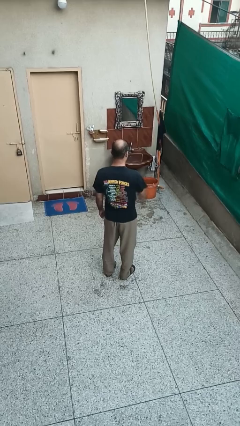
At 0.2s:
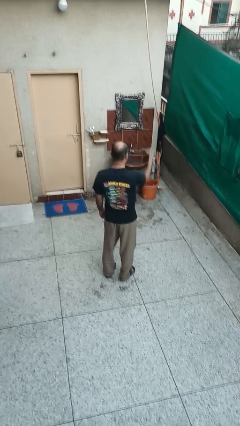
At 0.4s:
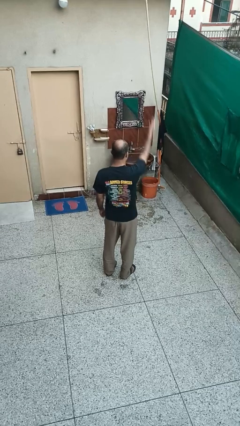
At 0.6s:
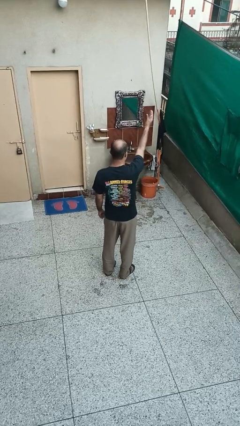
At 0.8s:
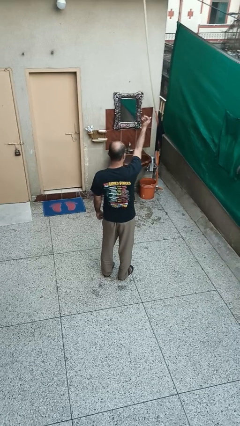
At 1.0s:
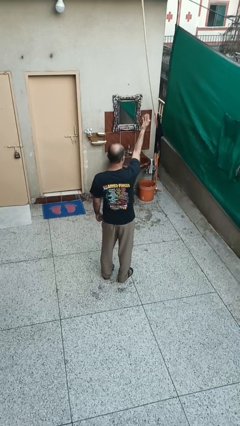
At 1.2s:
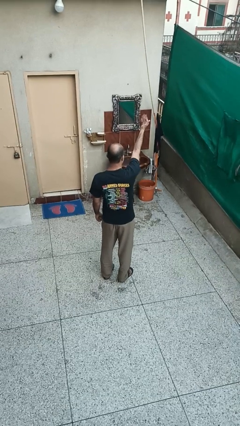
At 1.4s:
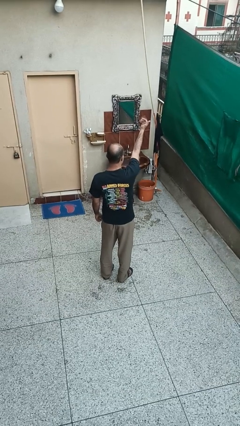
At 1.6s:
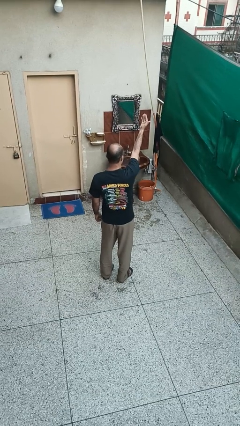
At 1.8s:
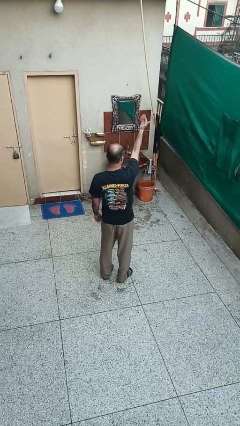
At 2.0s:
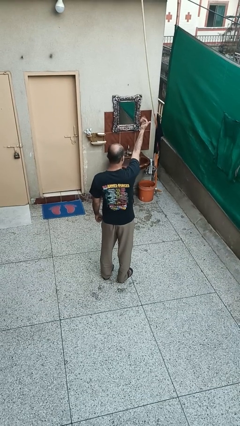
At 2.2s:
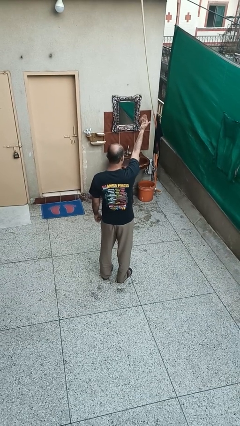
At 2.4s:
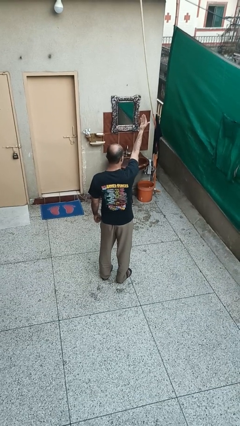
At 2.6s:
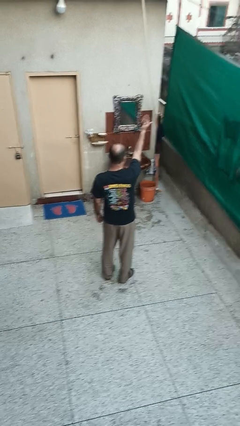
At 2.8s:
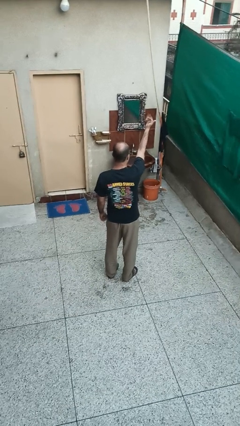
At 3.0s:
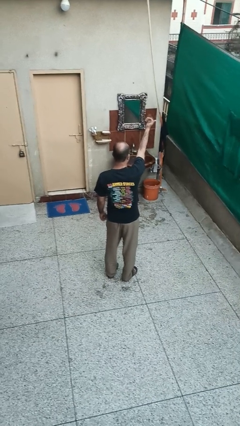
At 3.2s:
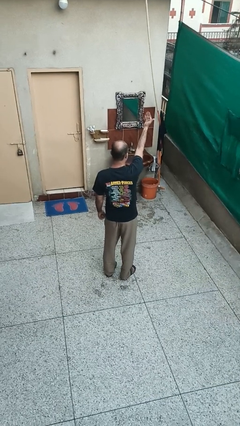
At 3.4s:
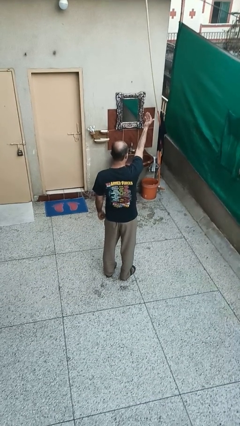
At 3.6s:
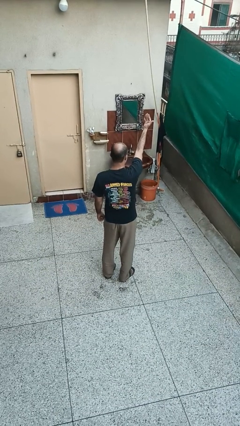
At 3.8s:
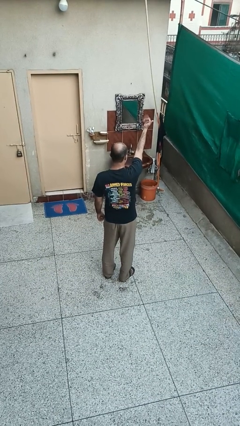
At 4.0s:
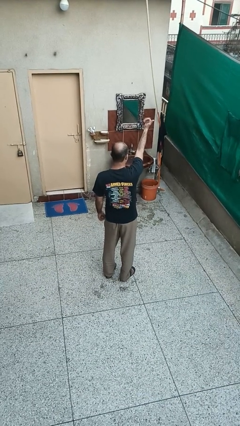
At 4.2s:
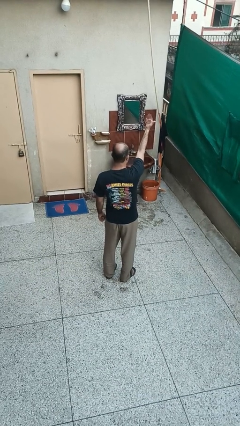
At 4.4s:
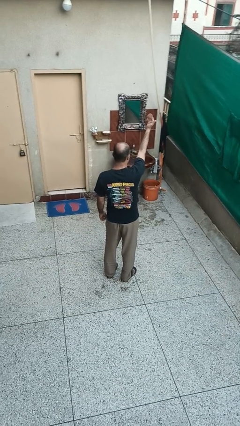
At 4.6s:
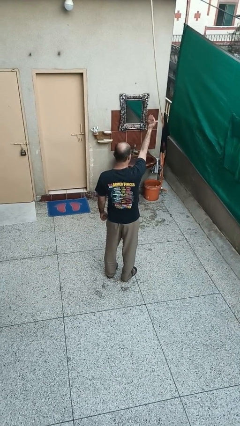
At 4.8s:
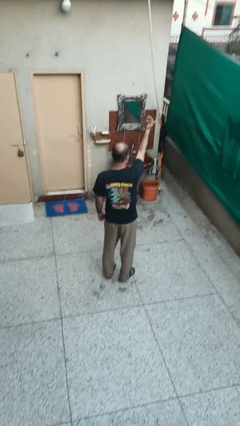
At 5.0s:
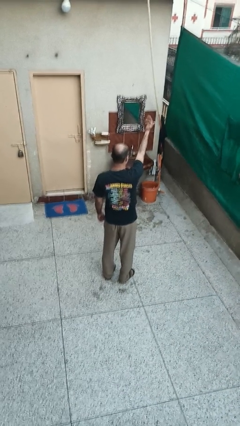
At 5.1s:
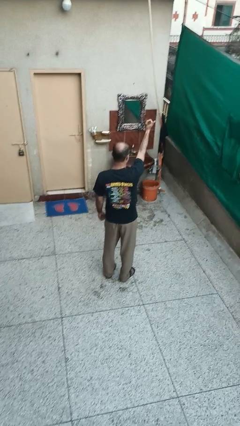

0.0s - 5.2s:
person gestures come here

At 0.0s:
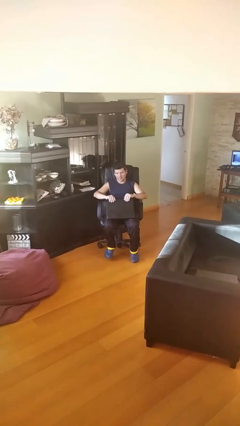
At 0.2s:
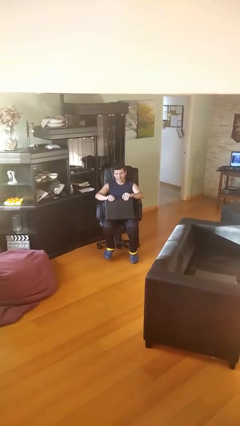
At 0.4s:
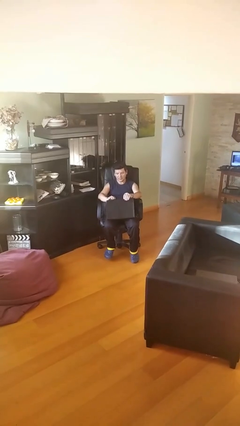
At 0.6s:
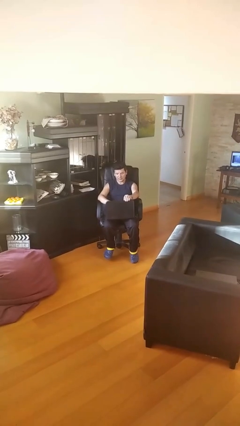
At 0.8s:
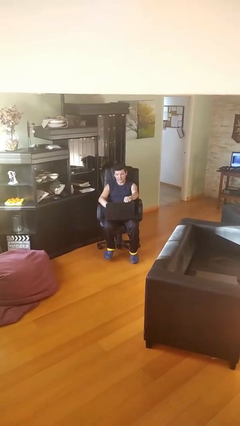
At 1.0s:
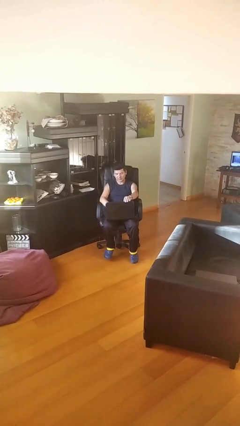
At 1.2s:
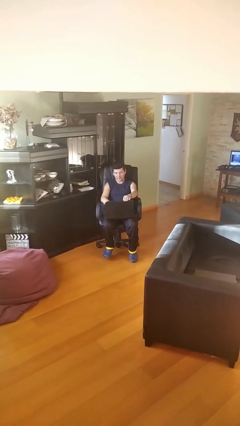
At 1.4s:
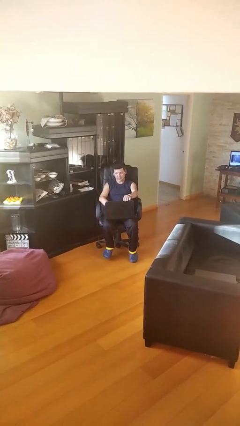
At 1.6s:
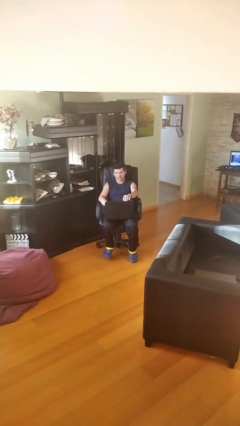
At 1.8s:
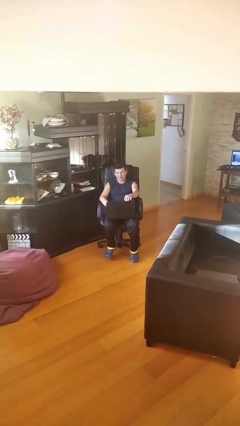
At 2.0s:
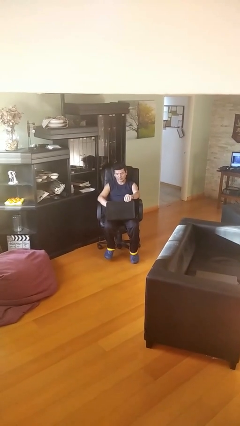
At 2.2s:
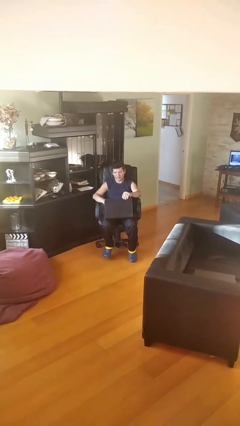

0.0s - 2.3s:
person interacts with laptop

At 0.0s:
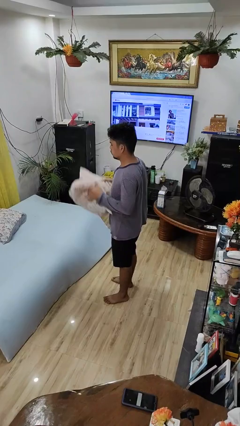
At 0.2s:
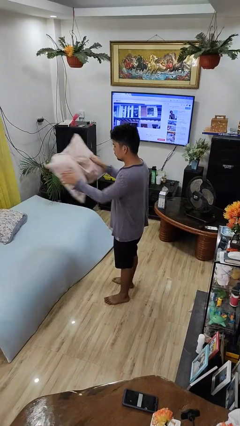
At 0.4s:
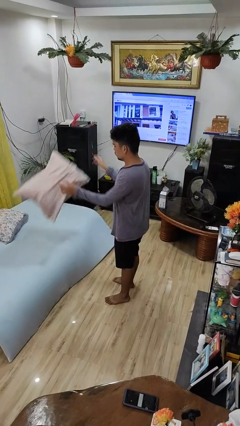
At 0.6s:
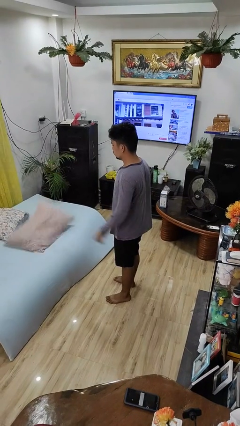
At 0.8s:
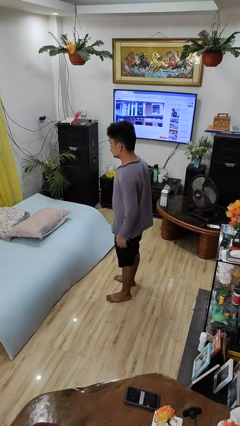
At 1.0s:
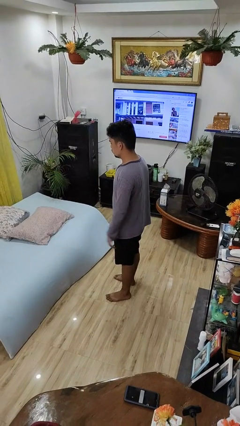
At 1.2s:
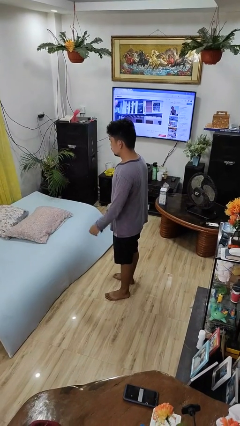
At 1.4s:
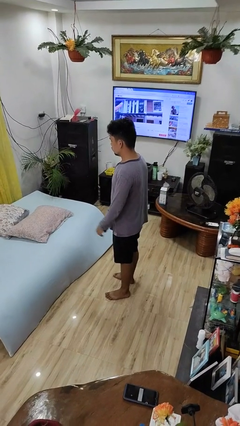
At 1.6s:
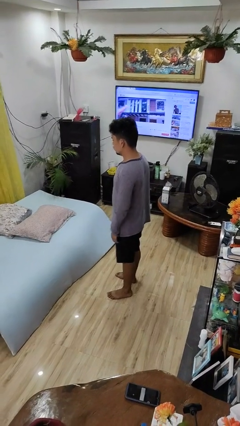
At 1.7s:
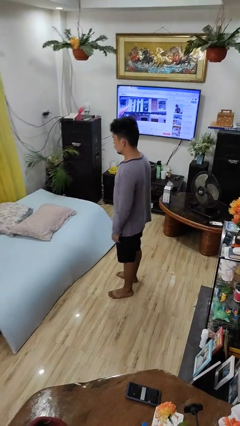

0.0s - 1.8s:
person throws object on bed

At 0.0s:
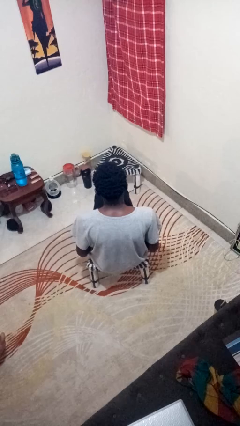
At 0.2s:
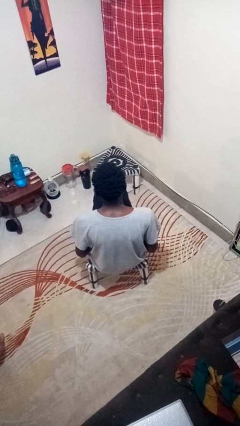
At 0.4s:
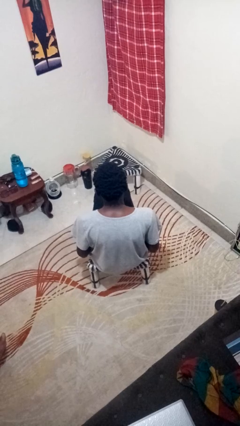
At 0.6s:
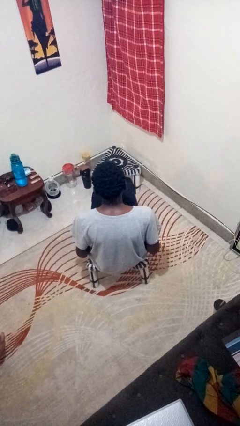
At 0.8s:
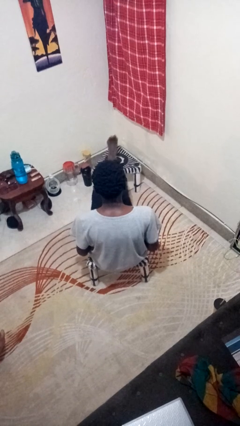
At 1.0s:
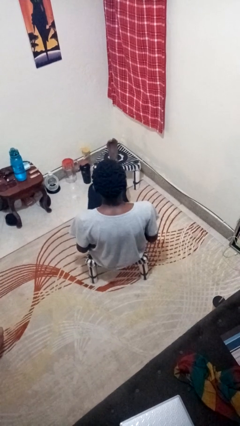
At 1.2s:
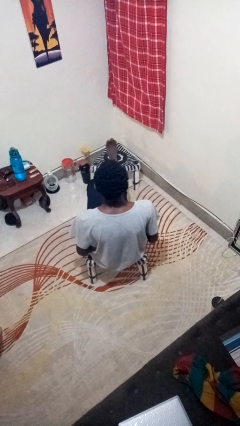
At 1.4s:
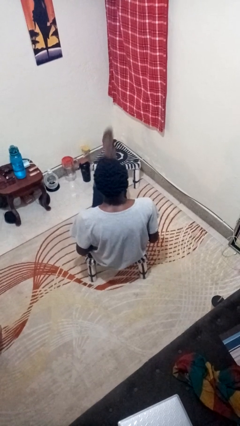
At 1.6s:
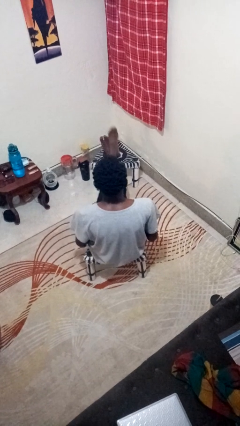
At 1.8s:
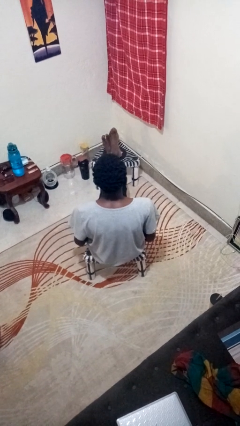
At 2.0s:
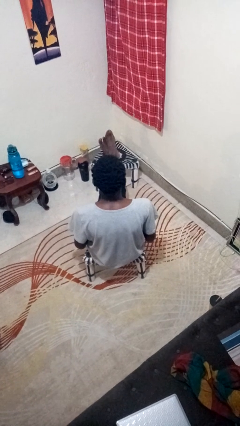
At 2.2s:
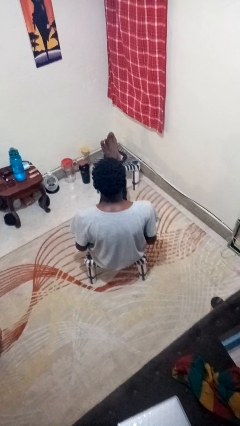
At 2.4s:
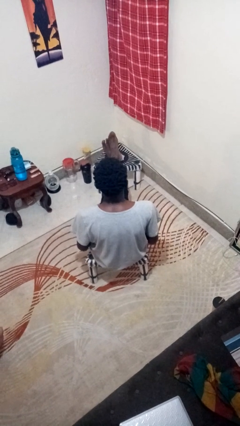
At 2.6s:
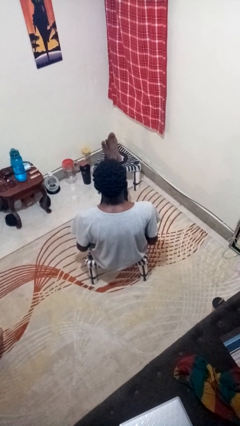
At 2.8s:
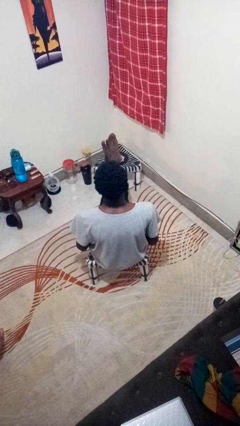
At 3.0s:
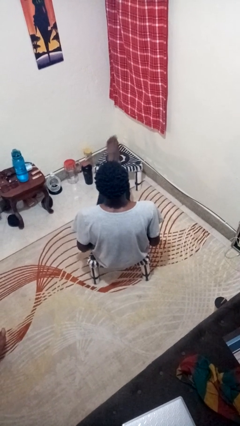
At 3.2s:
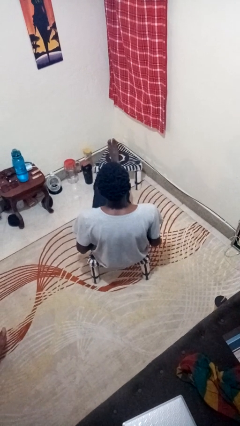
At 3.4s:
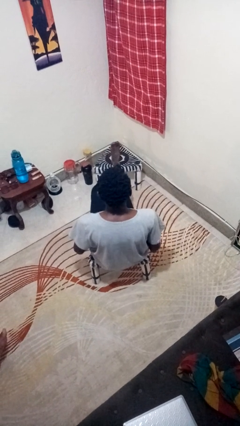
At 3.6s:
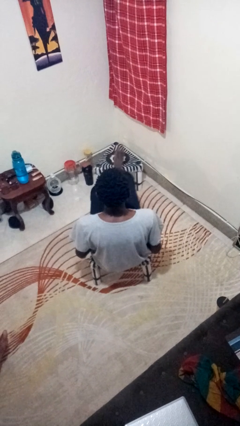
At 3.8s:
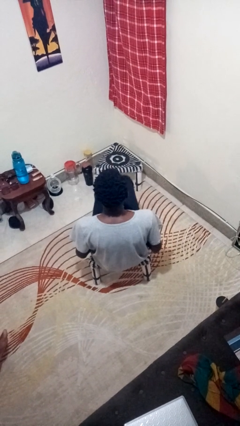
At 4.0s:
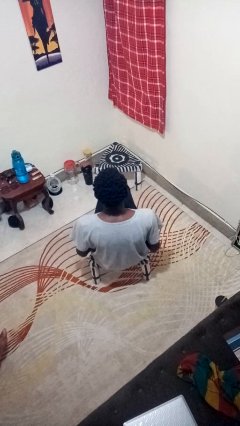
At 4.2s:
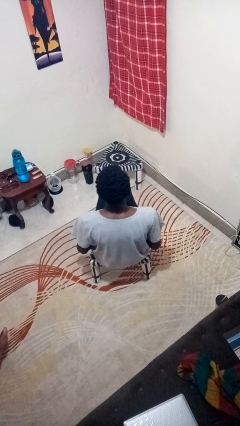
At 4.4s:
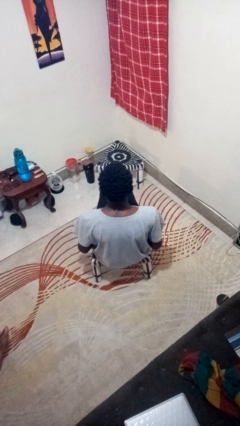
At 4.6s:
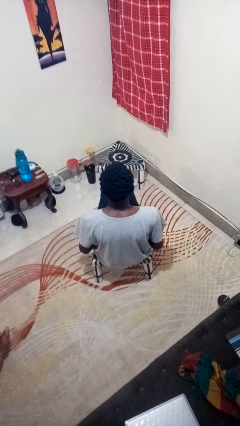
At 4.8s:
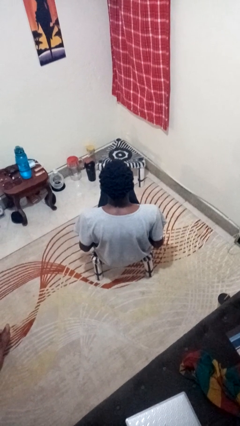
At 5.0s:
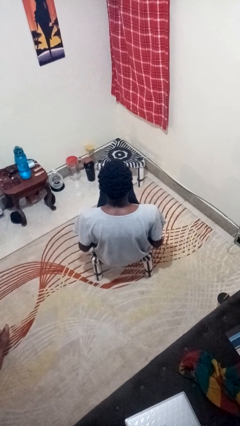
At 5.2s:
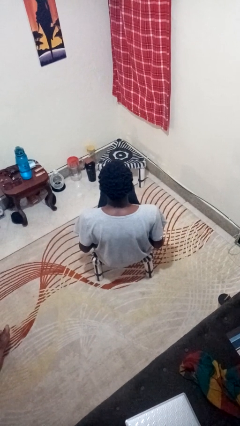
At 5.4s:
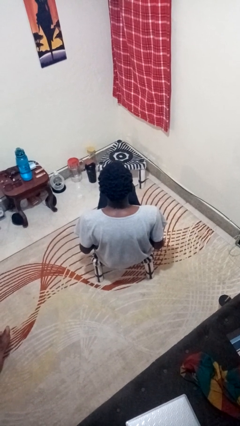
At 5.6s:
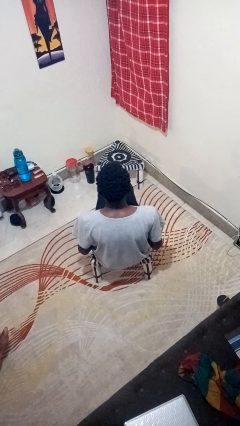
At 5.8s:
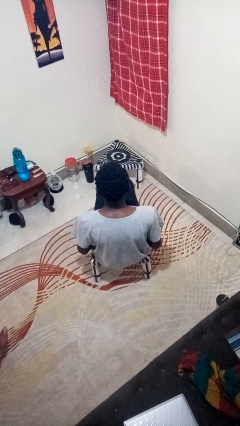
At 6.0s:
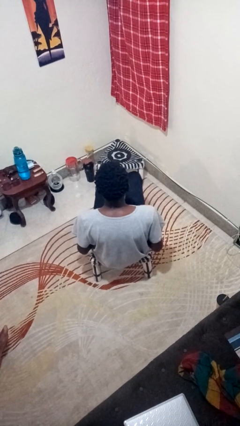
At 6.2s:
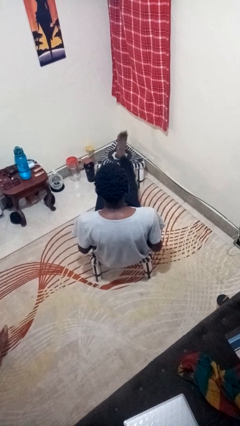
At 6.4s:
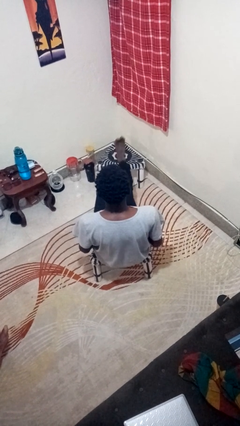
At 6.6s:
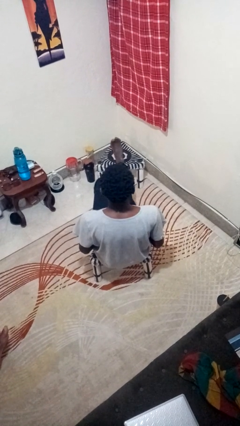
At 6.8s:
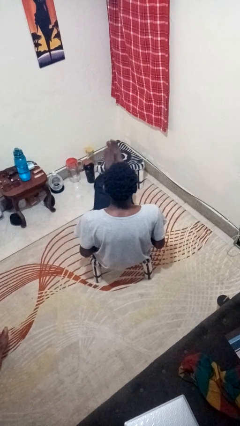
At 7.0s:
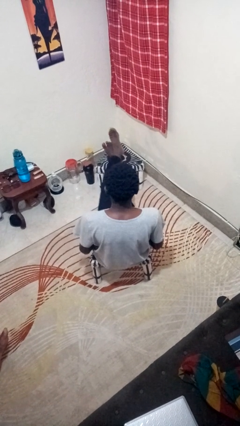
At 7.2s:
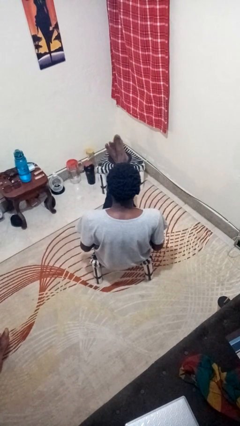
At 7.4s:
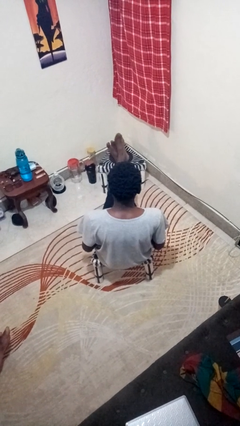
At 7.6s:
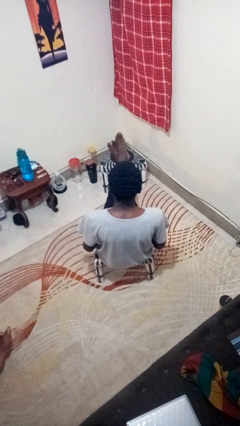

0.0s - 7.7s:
person puts feet up

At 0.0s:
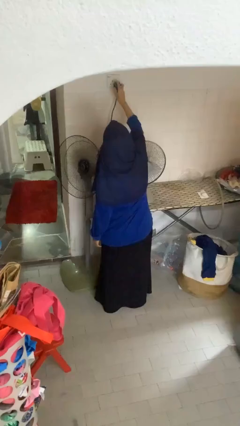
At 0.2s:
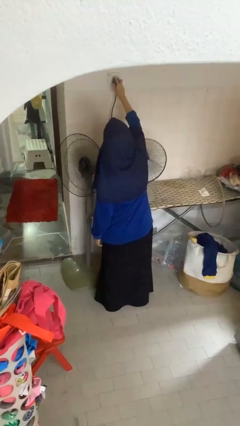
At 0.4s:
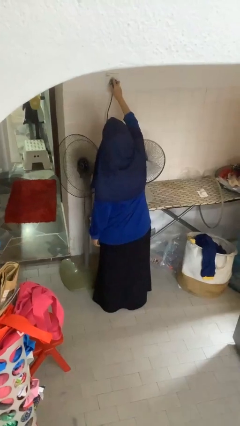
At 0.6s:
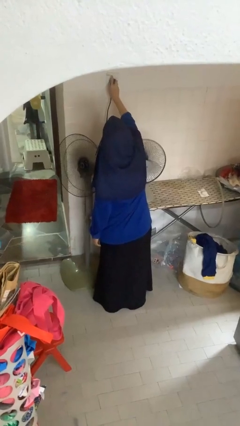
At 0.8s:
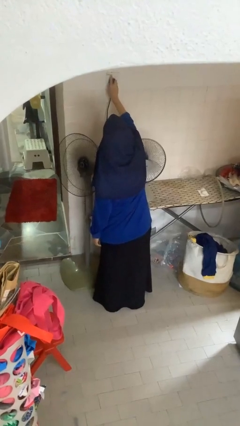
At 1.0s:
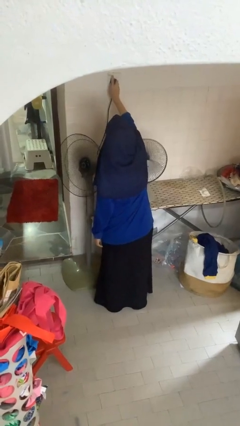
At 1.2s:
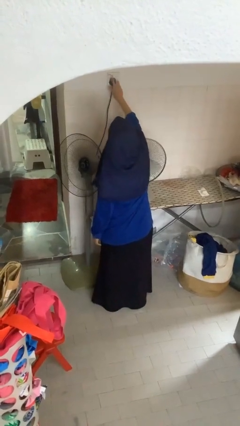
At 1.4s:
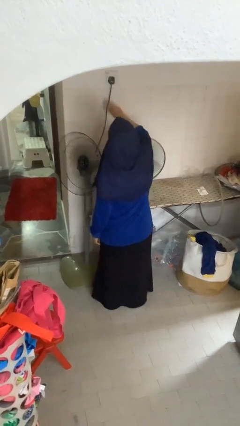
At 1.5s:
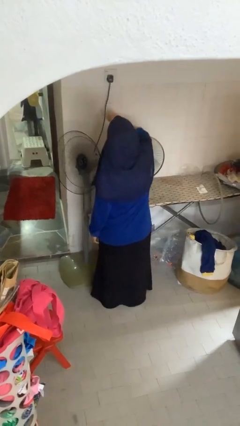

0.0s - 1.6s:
person plugs into electrical socket
